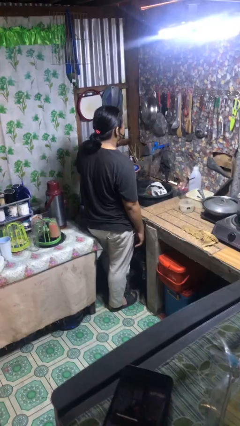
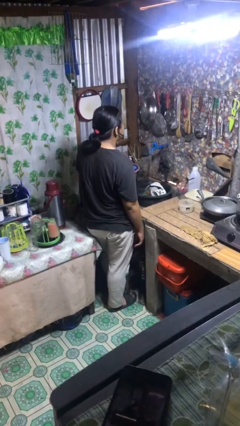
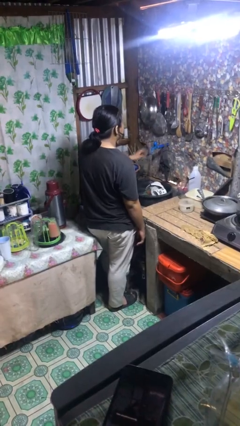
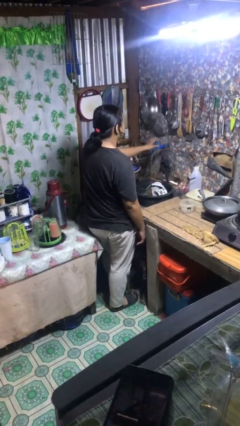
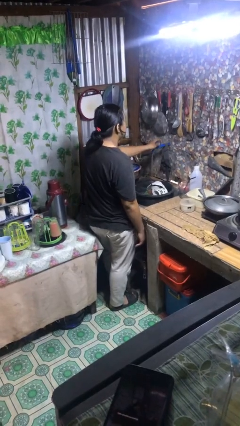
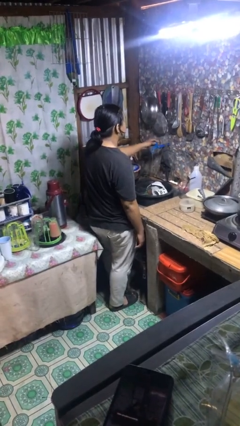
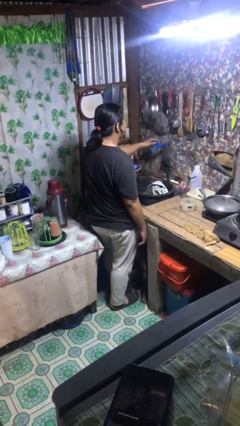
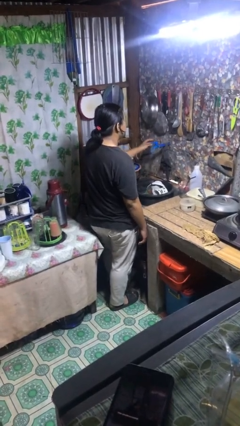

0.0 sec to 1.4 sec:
person turns off faucet

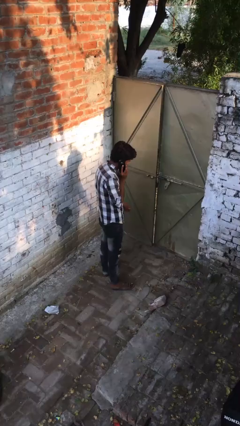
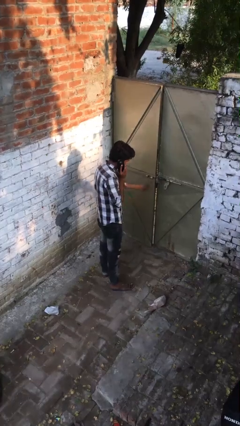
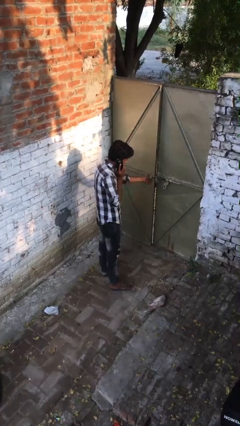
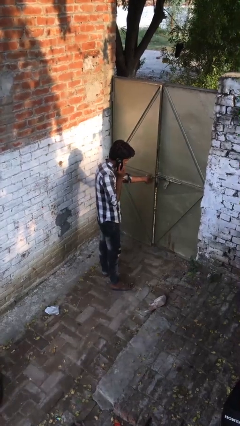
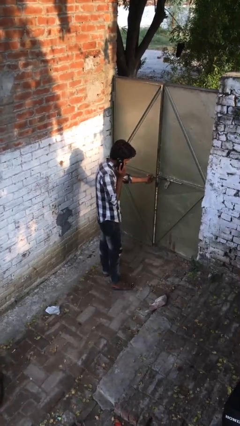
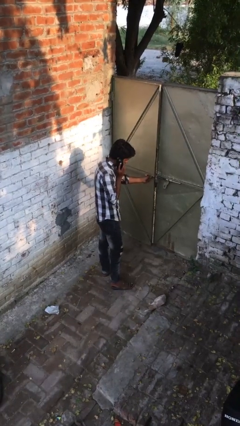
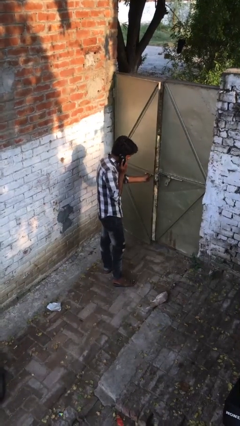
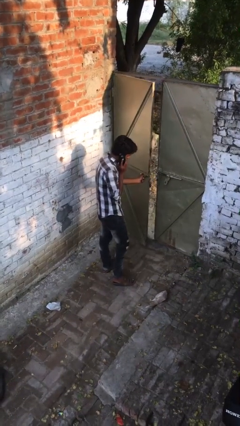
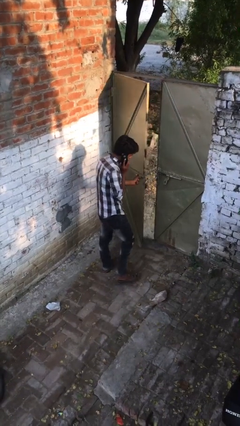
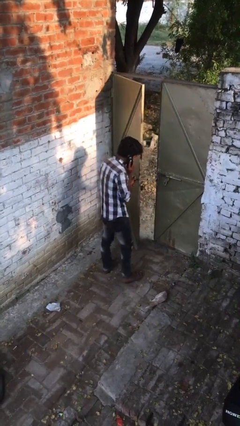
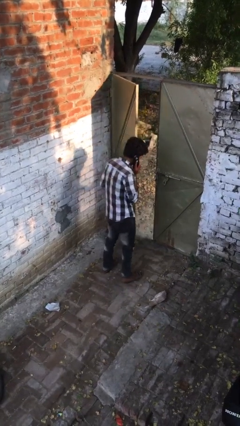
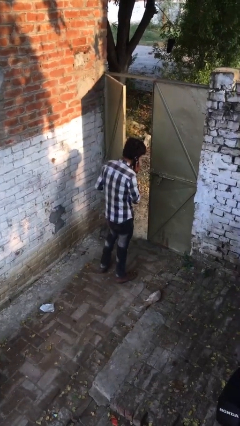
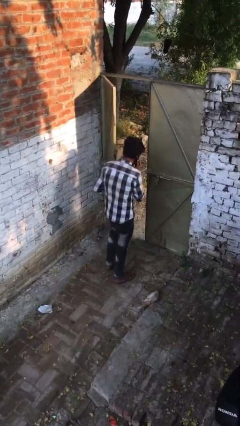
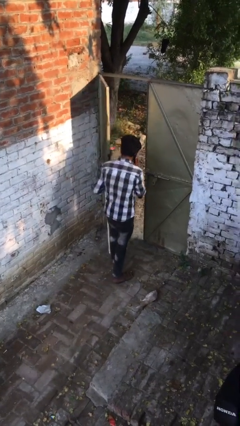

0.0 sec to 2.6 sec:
person opens facility door

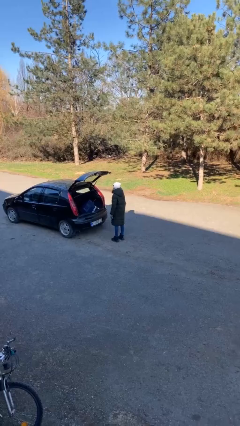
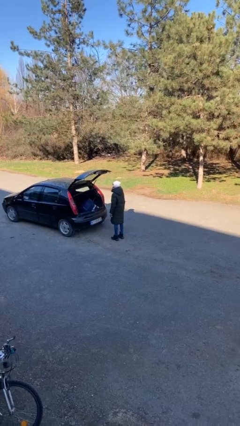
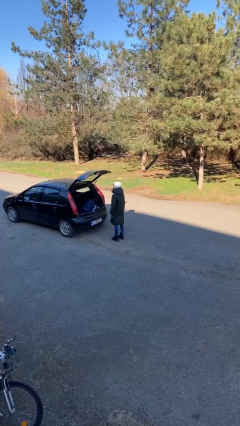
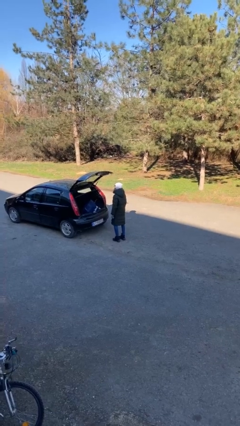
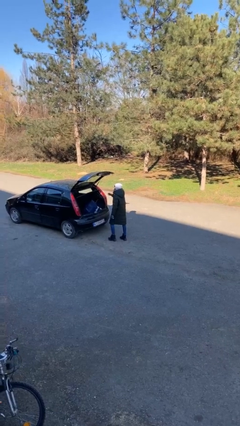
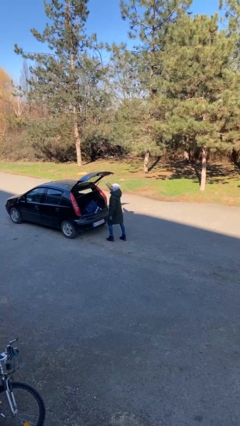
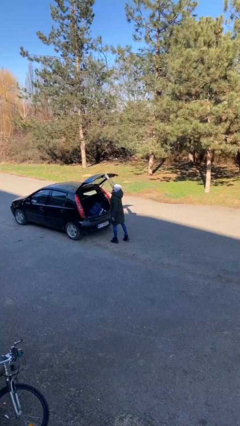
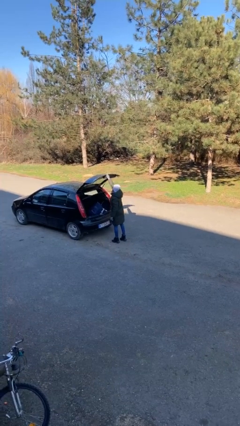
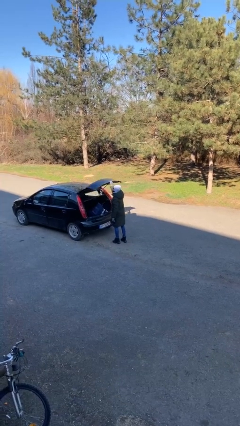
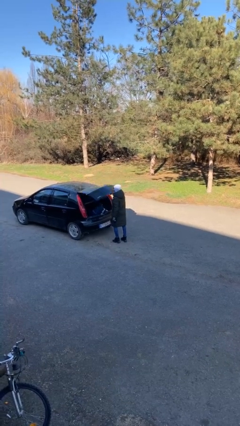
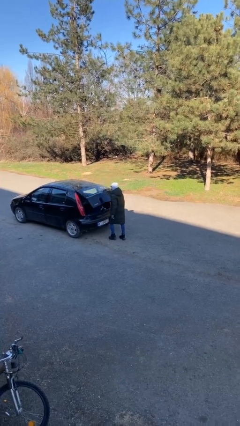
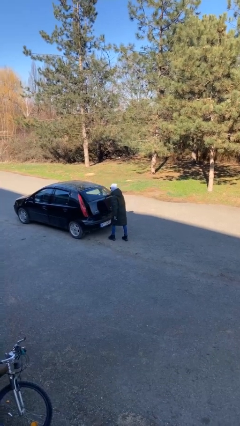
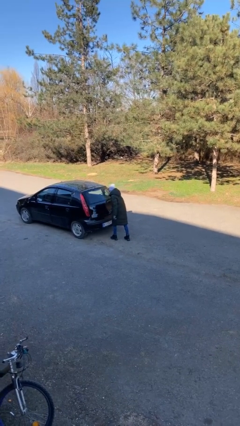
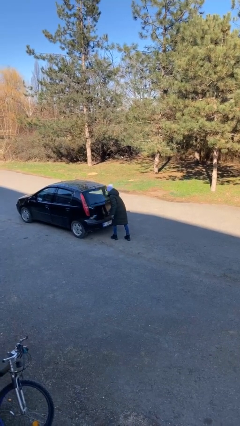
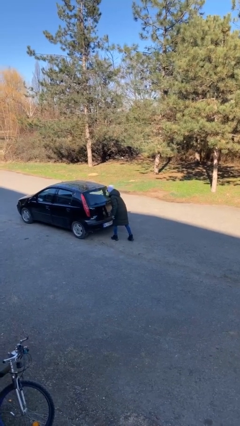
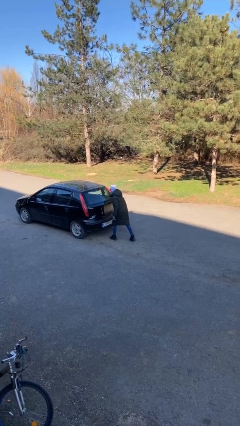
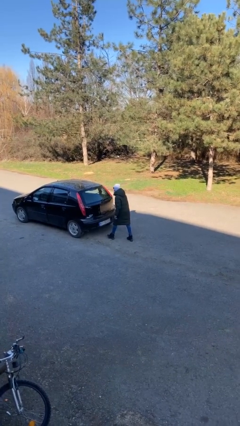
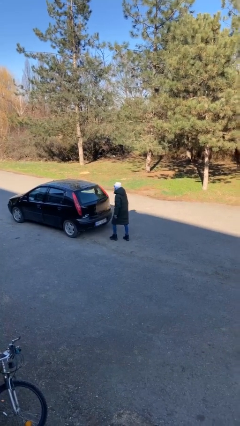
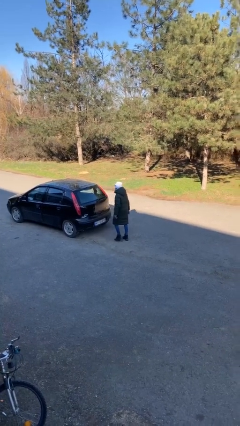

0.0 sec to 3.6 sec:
person closes car trunk

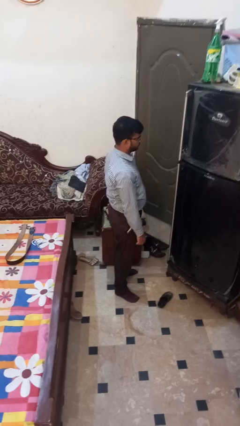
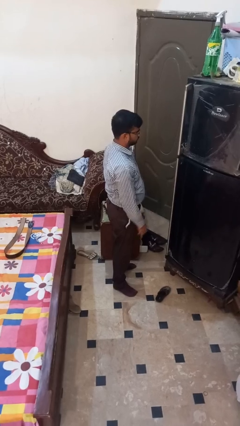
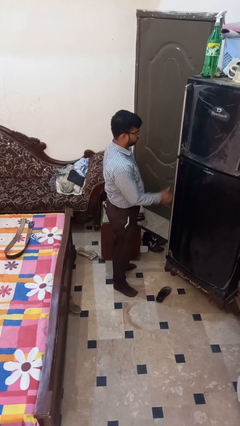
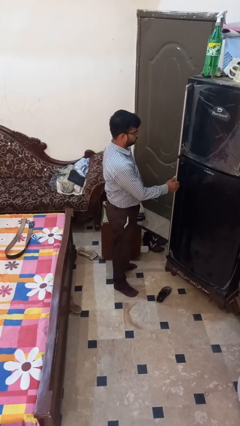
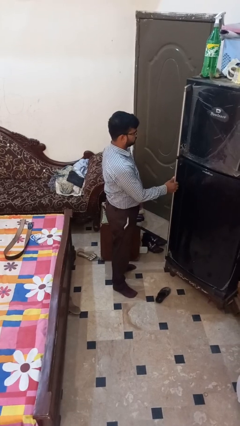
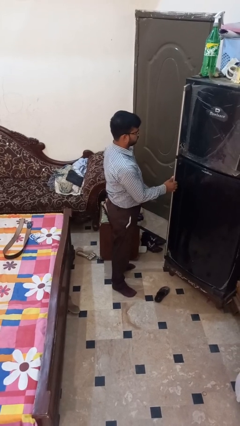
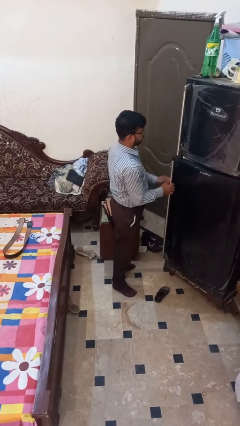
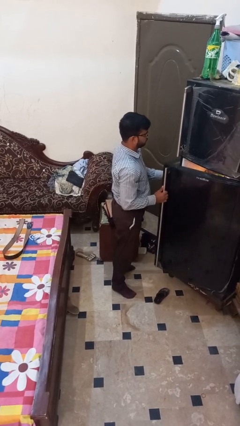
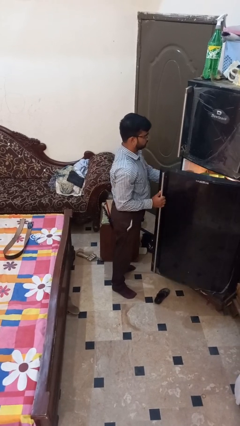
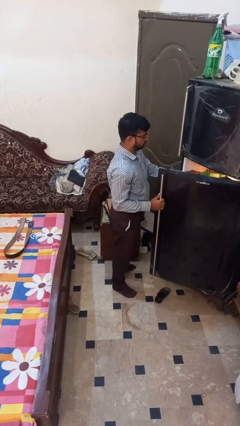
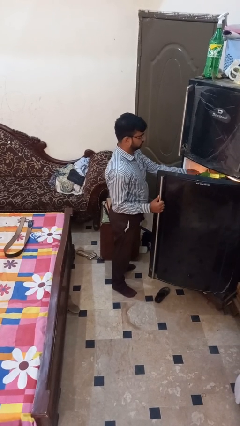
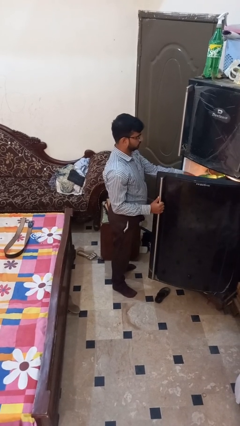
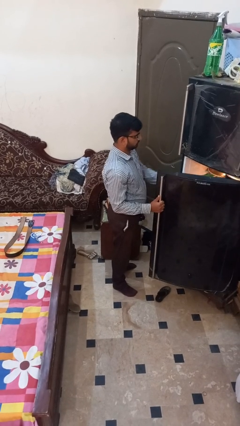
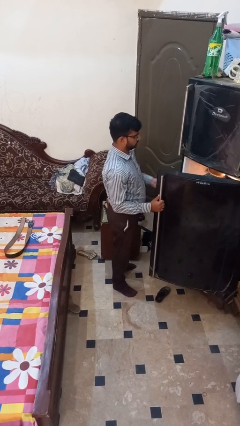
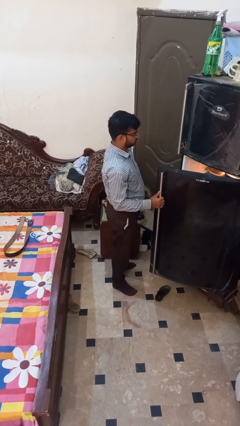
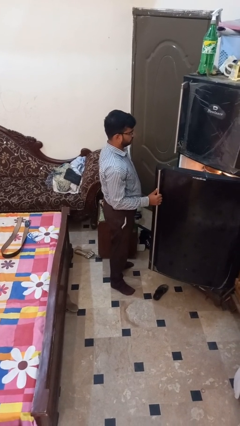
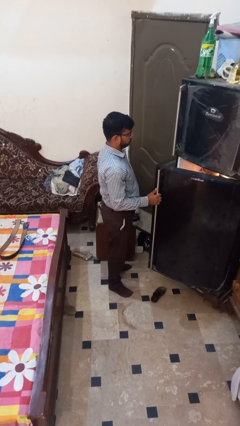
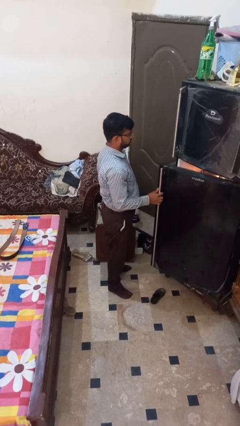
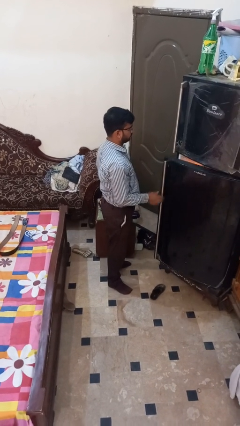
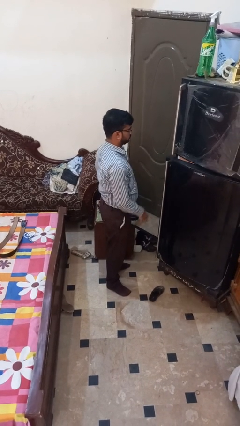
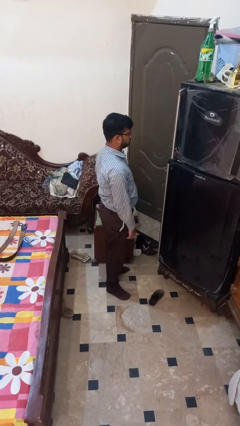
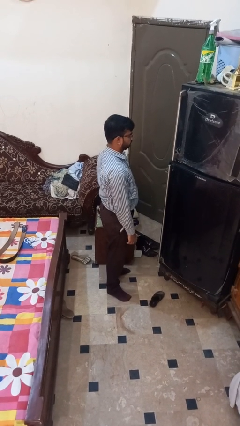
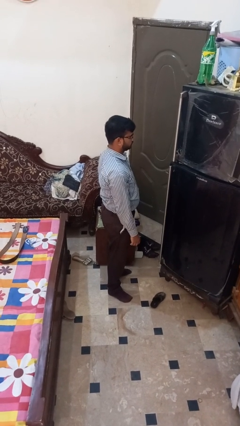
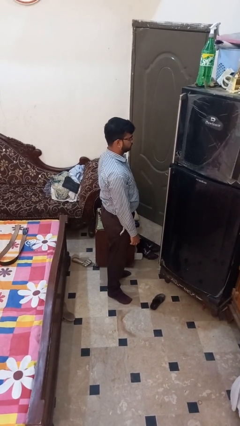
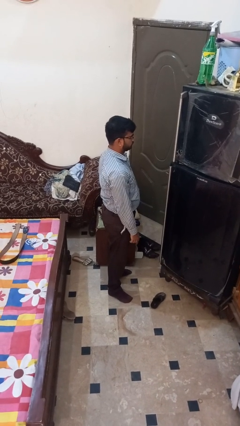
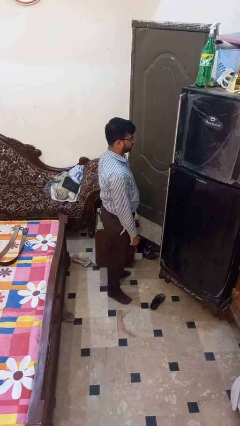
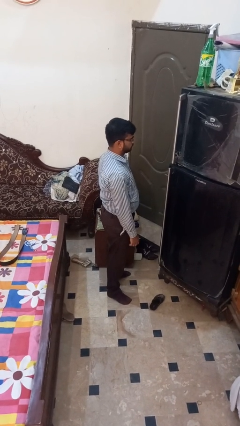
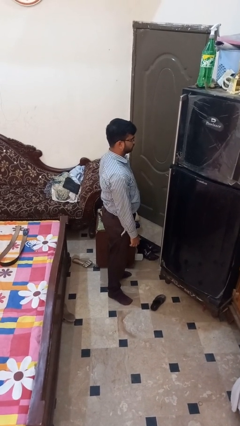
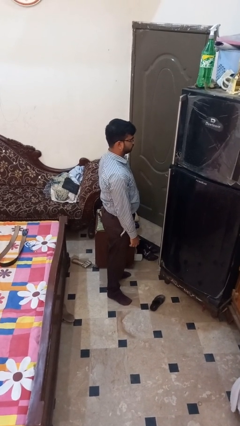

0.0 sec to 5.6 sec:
person takes object from refrigerator

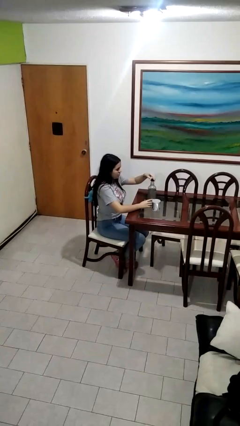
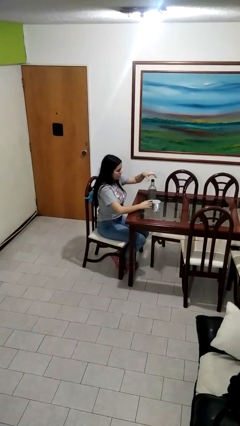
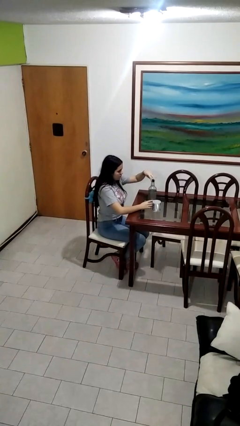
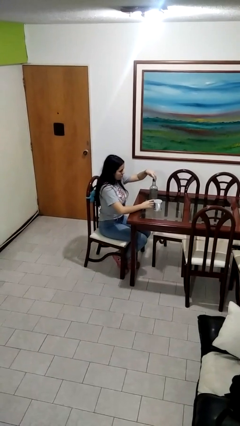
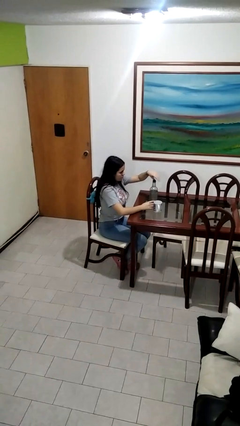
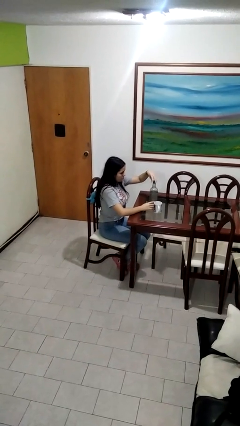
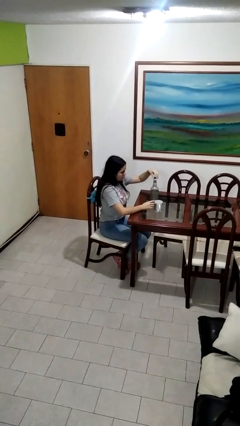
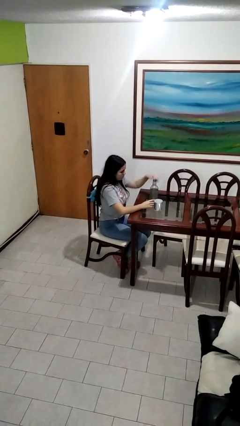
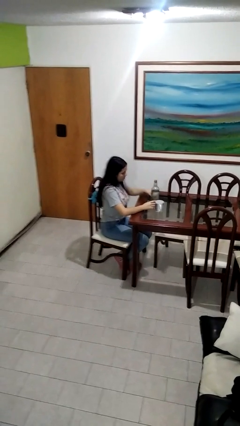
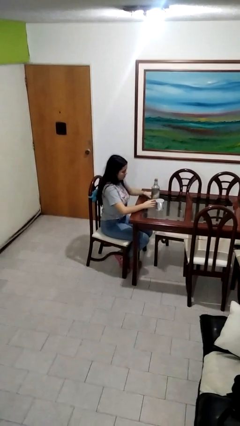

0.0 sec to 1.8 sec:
person unscrews lid from bottle

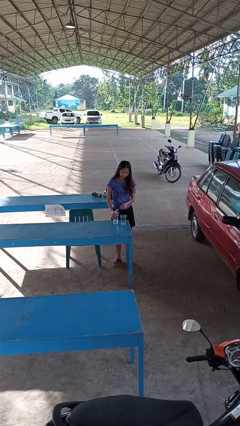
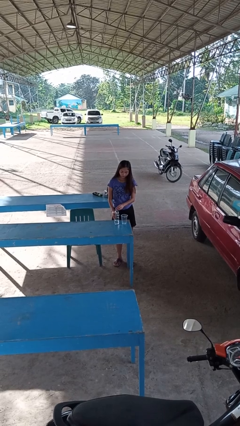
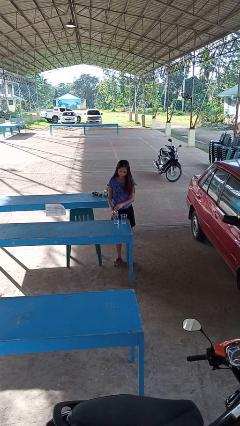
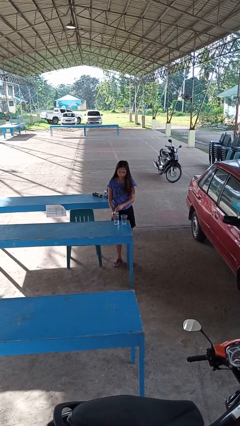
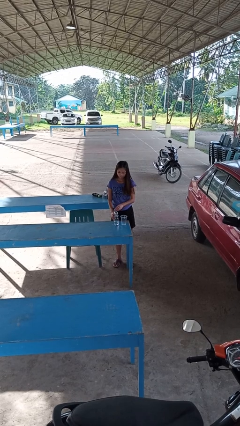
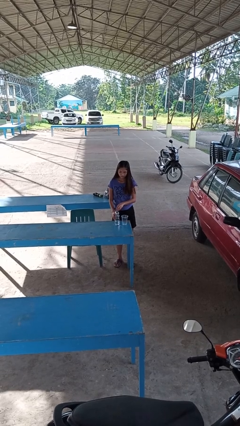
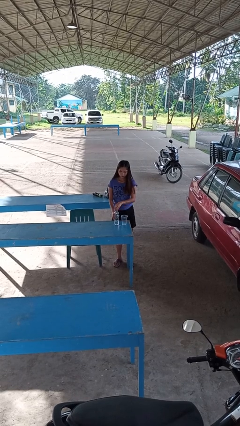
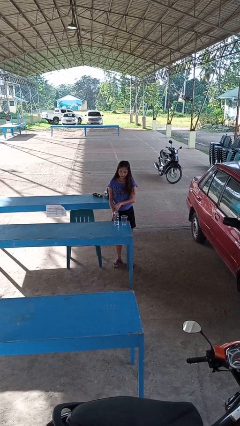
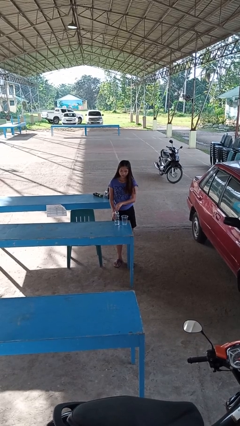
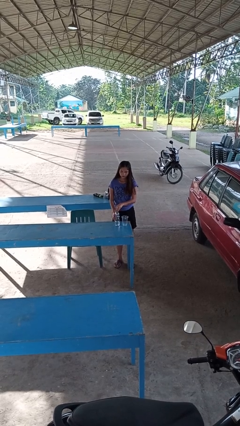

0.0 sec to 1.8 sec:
person screws lid to bottle

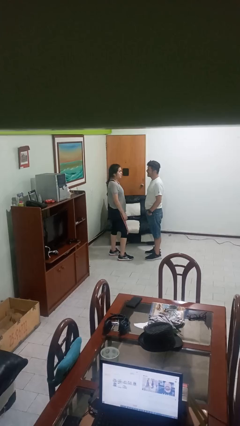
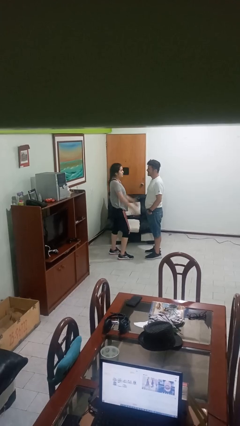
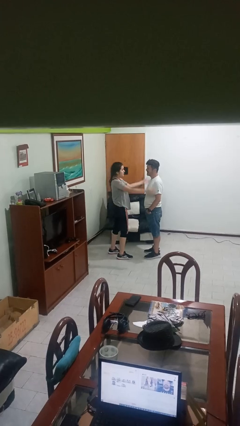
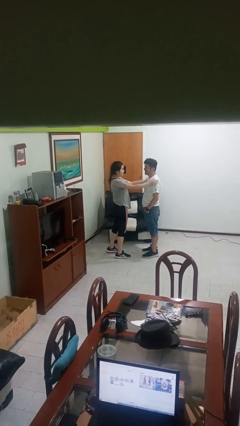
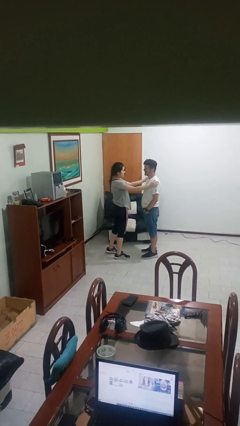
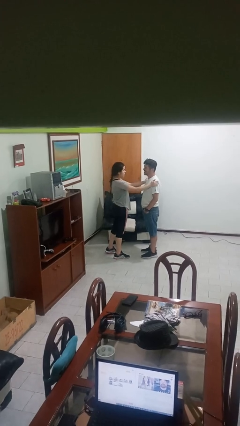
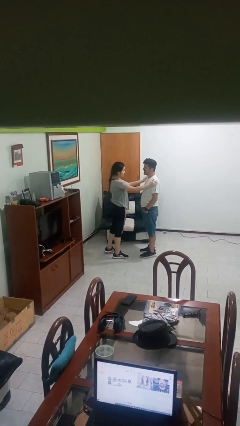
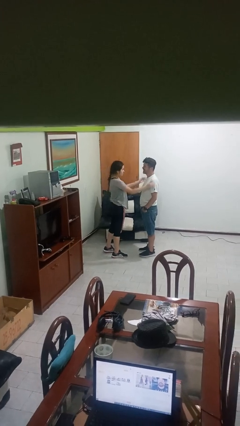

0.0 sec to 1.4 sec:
person pounds shoulders of person
